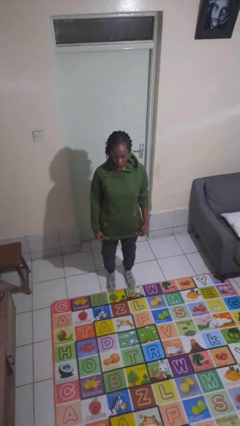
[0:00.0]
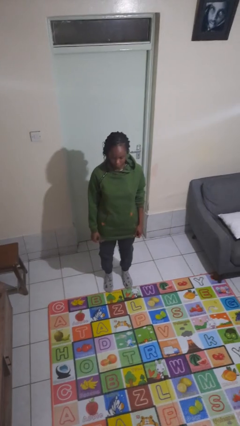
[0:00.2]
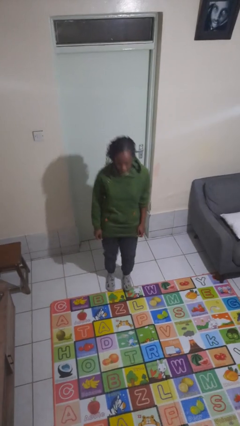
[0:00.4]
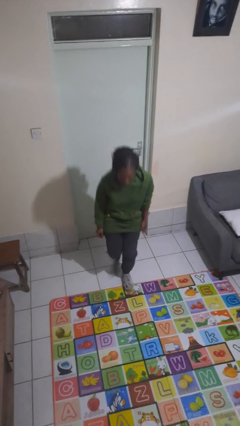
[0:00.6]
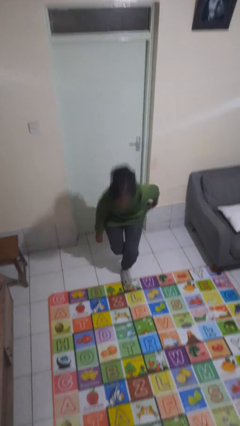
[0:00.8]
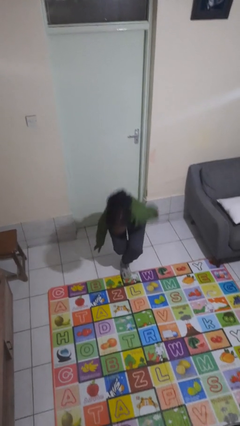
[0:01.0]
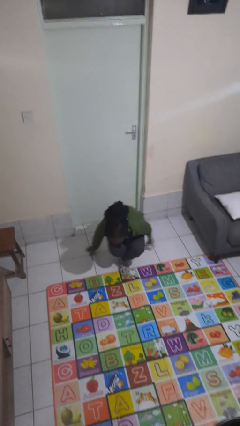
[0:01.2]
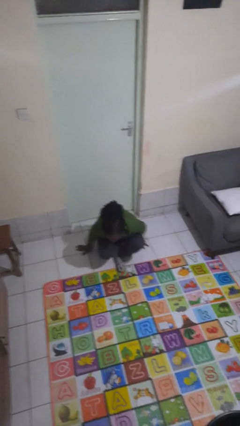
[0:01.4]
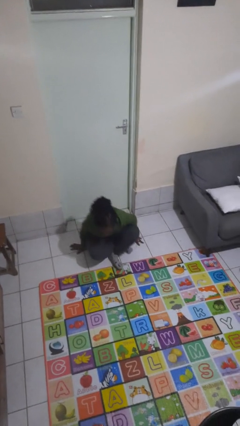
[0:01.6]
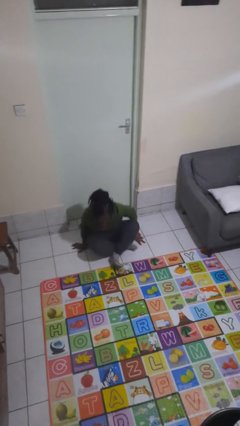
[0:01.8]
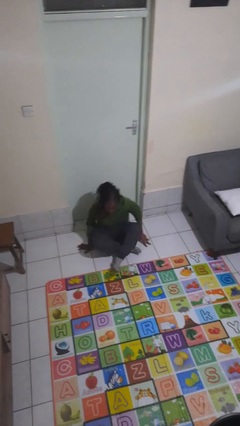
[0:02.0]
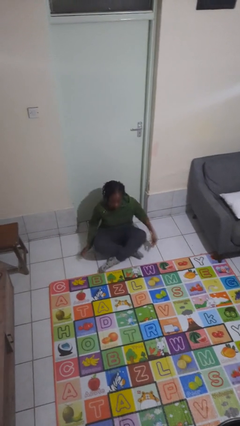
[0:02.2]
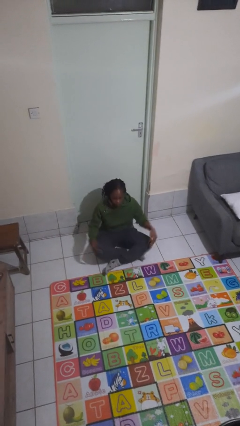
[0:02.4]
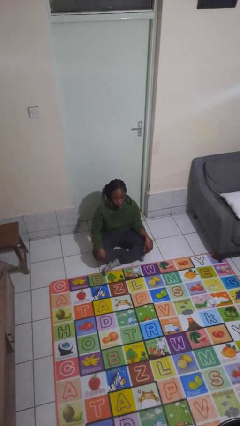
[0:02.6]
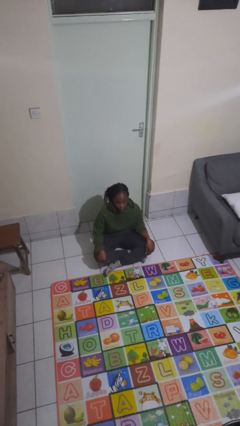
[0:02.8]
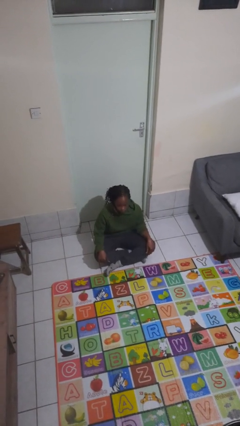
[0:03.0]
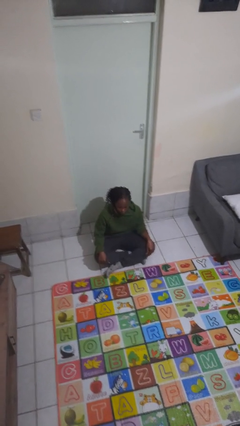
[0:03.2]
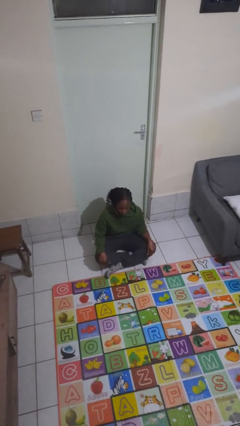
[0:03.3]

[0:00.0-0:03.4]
person sits crisscross

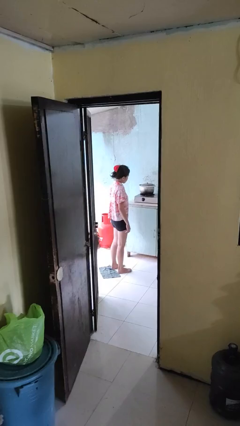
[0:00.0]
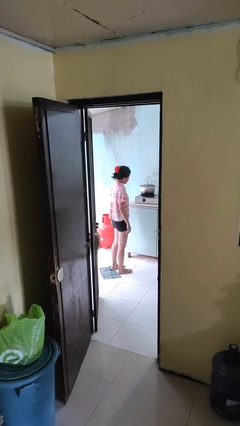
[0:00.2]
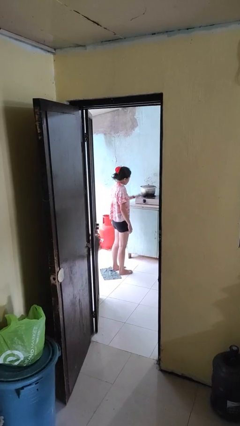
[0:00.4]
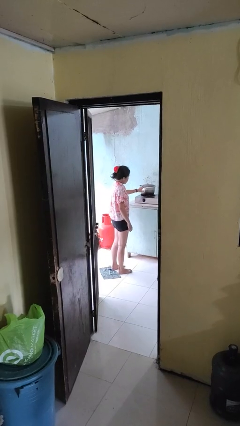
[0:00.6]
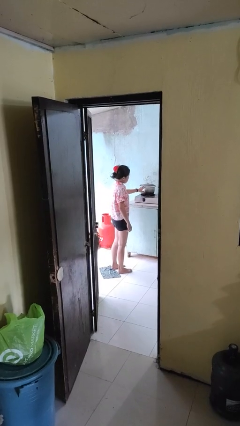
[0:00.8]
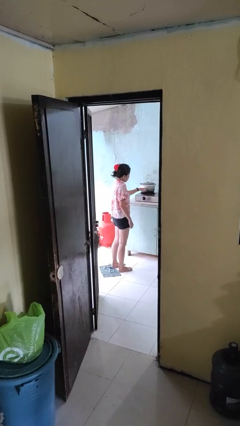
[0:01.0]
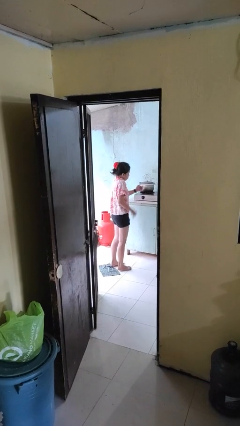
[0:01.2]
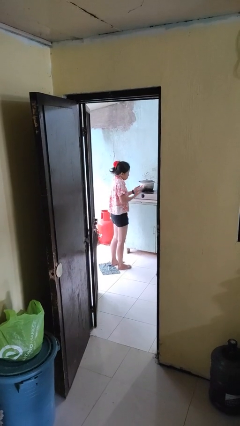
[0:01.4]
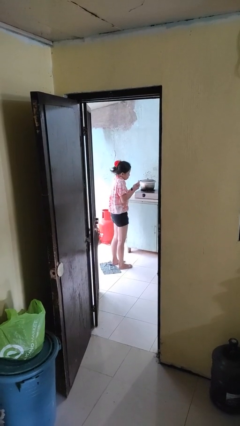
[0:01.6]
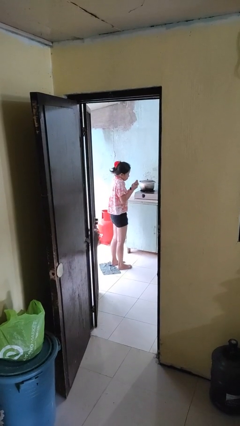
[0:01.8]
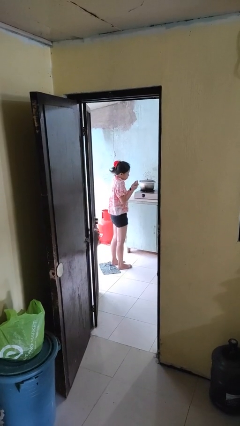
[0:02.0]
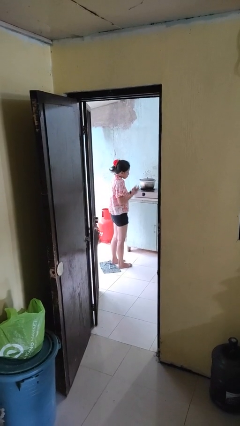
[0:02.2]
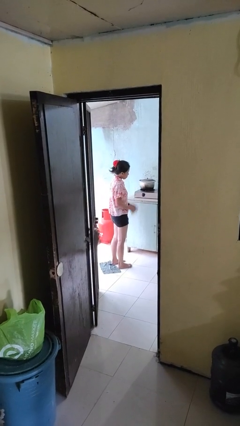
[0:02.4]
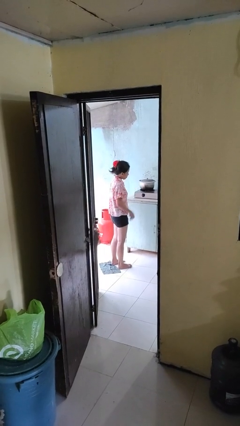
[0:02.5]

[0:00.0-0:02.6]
person burns hand

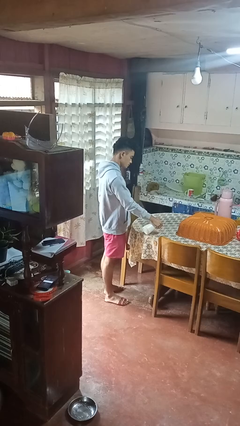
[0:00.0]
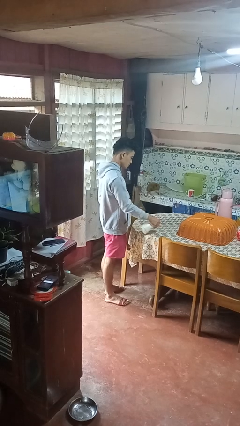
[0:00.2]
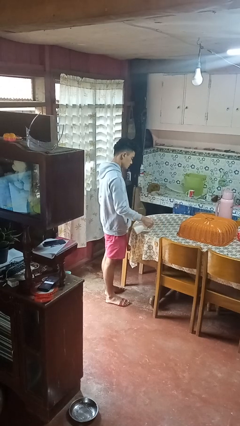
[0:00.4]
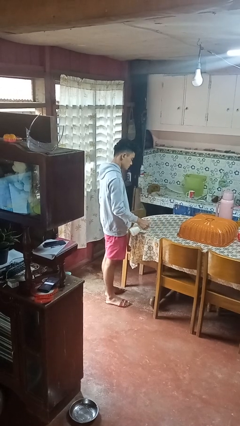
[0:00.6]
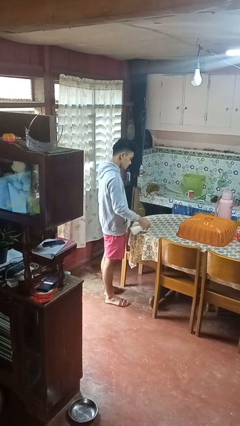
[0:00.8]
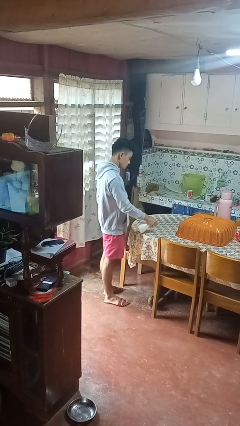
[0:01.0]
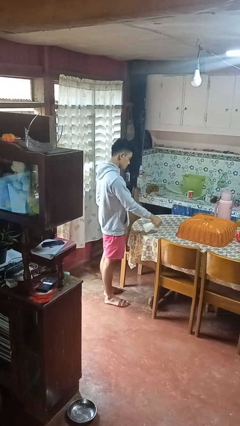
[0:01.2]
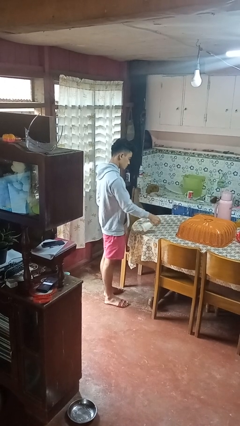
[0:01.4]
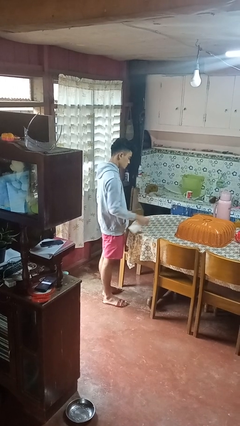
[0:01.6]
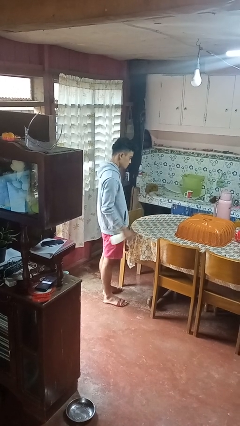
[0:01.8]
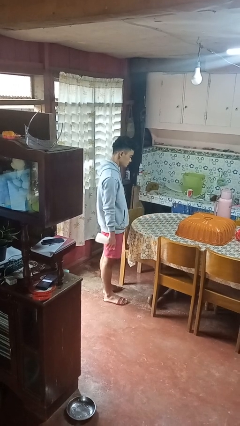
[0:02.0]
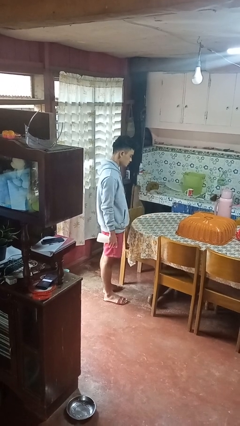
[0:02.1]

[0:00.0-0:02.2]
person sprays from bottle

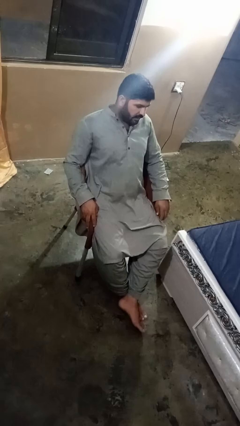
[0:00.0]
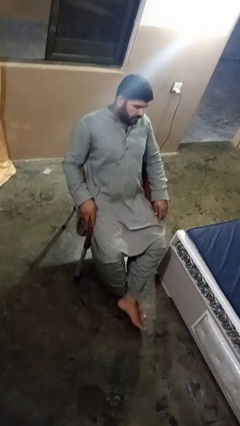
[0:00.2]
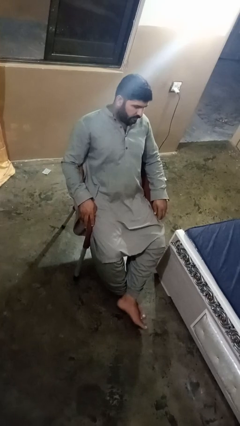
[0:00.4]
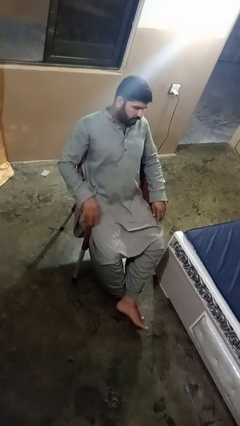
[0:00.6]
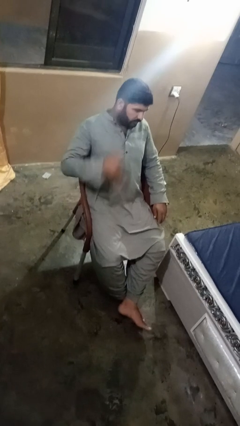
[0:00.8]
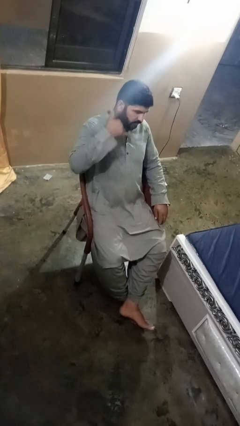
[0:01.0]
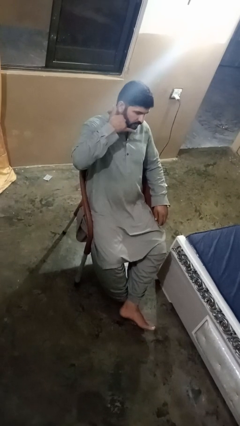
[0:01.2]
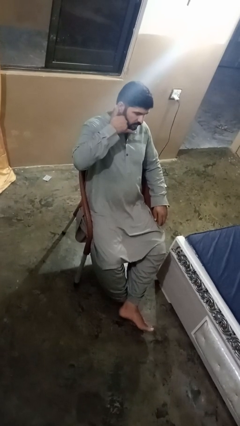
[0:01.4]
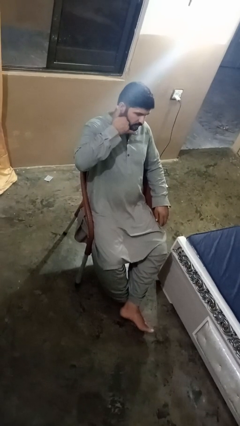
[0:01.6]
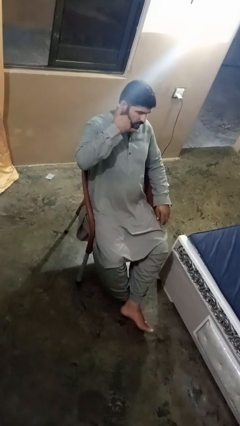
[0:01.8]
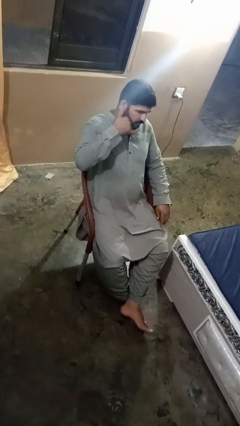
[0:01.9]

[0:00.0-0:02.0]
person gestures call me

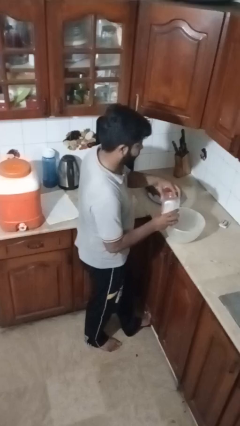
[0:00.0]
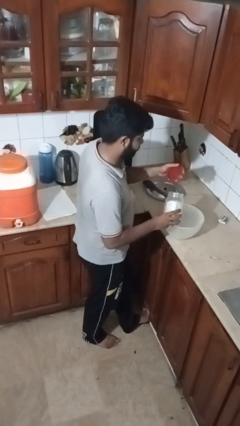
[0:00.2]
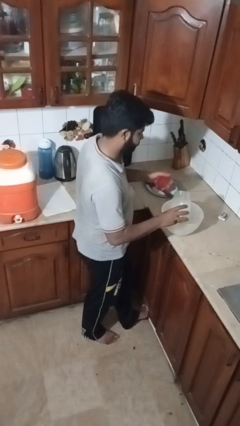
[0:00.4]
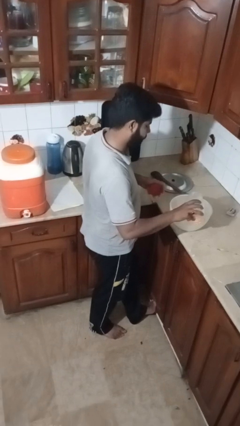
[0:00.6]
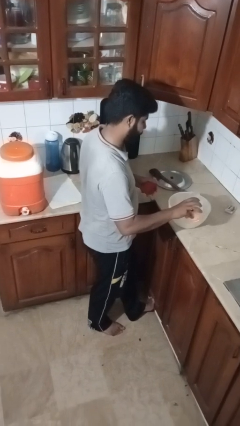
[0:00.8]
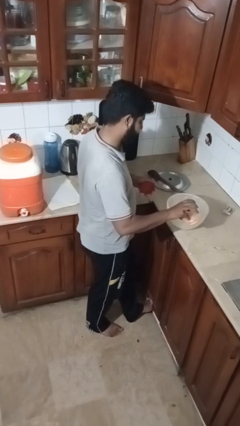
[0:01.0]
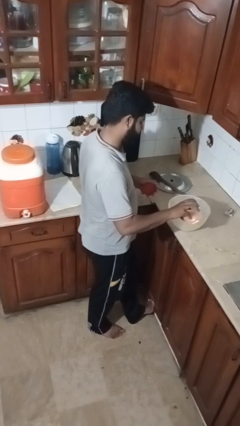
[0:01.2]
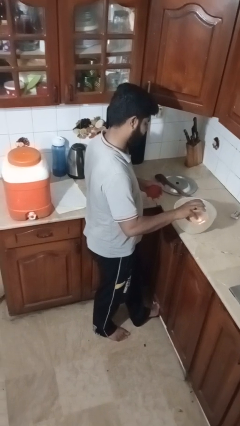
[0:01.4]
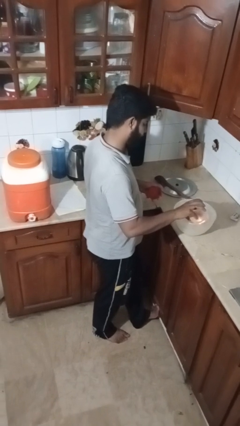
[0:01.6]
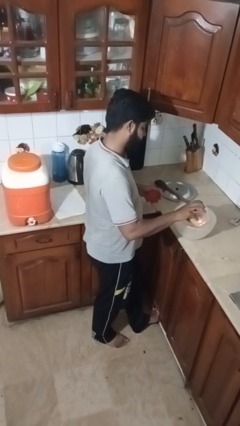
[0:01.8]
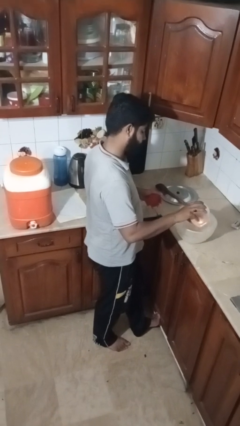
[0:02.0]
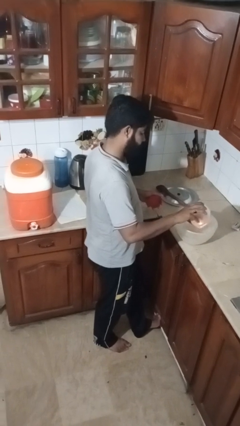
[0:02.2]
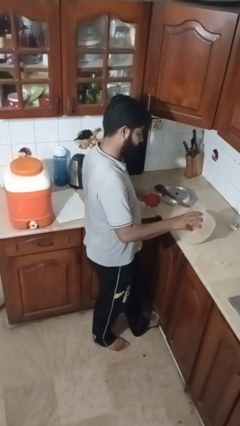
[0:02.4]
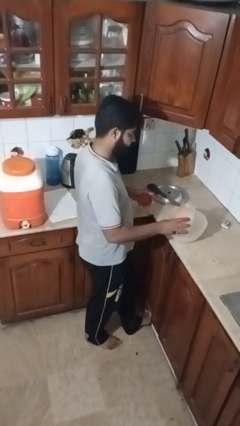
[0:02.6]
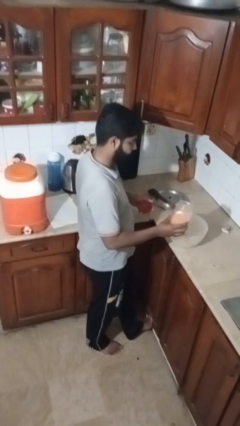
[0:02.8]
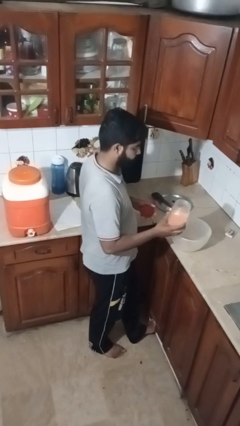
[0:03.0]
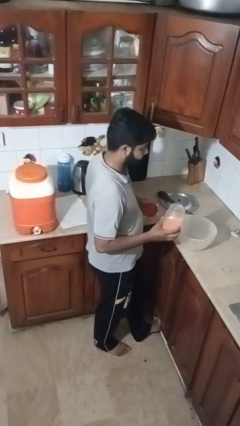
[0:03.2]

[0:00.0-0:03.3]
person pours into bowl

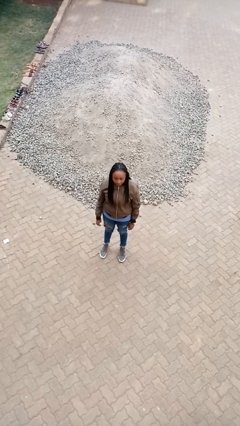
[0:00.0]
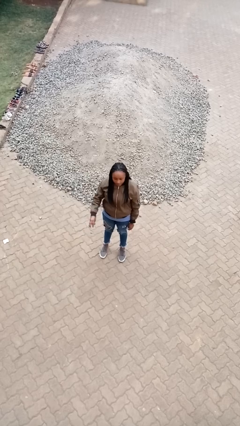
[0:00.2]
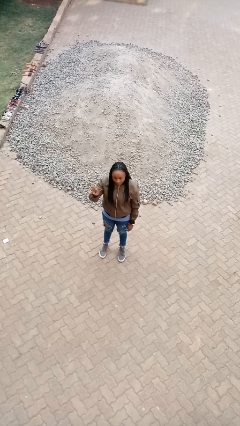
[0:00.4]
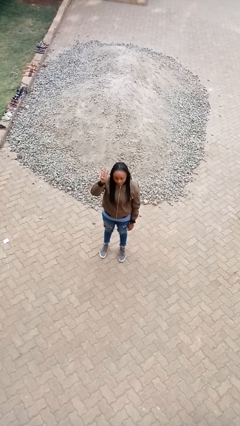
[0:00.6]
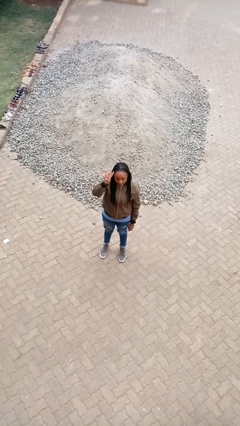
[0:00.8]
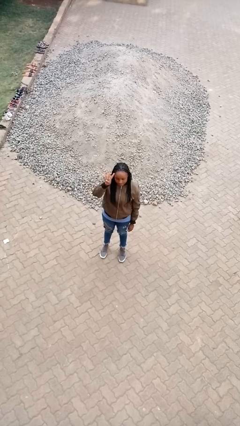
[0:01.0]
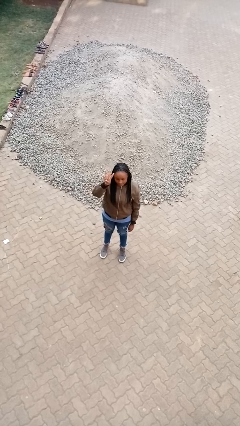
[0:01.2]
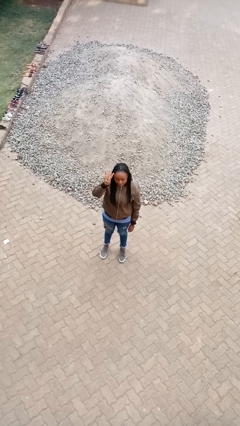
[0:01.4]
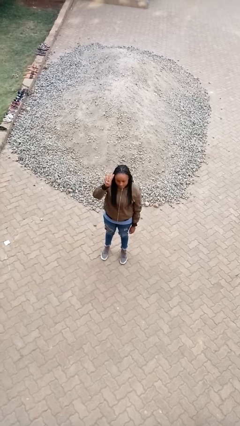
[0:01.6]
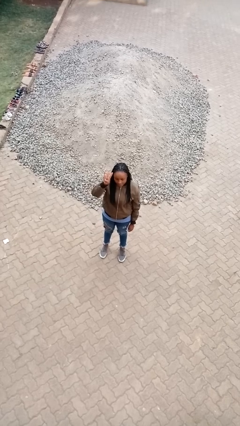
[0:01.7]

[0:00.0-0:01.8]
person gestures number three

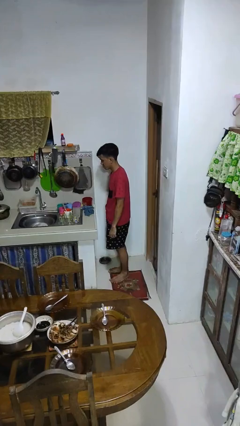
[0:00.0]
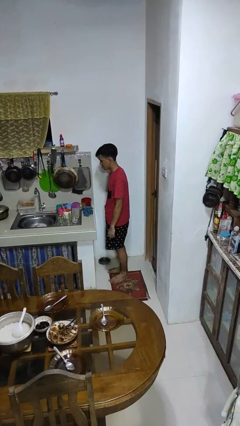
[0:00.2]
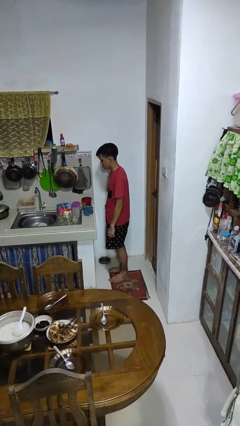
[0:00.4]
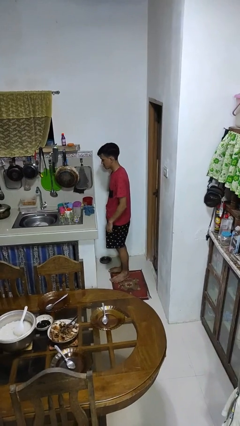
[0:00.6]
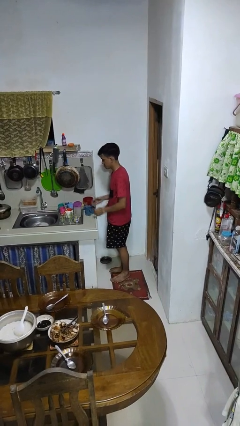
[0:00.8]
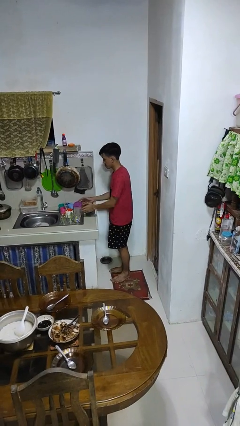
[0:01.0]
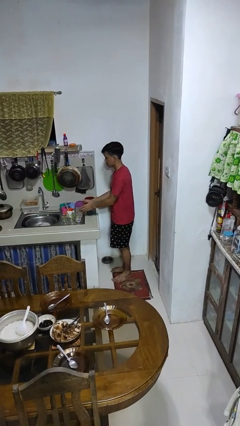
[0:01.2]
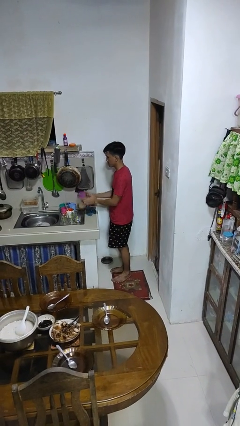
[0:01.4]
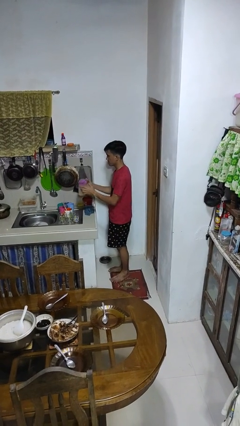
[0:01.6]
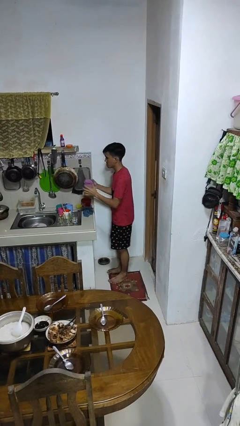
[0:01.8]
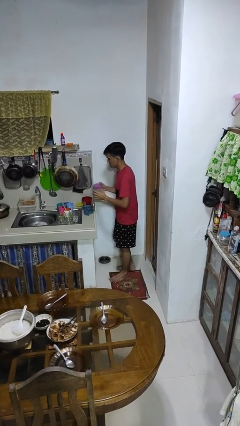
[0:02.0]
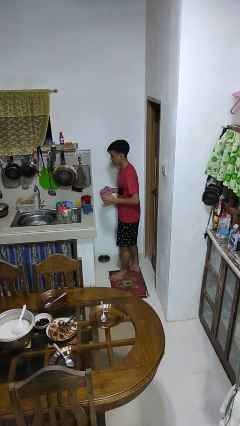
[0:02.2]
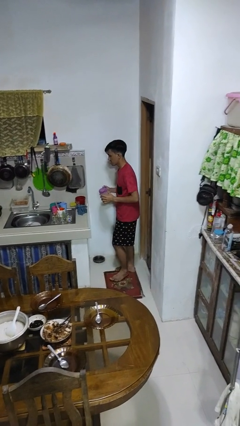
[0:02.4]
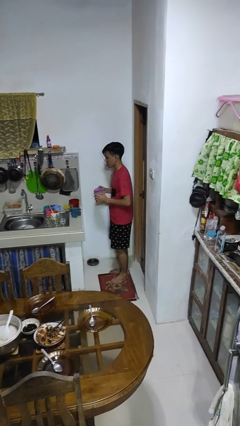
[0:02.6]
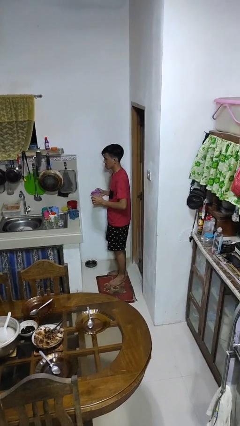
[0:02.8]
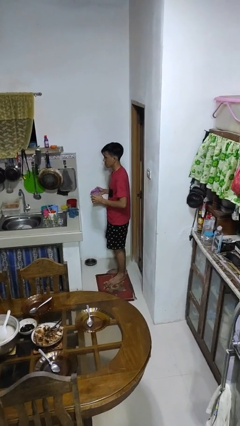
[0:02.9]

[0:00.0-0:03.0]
person picks up object from countertop
